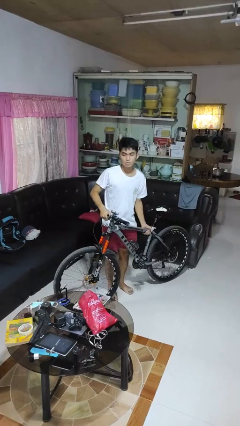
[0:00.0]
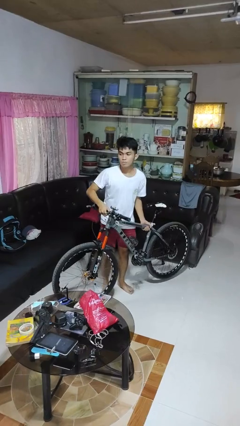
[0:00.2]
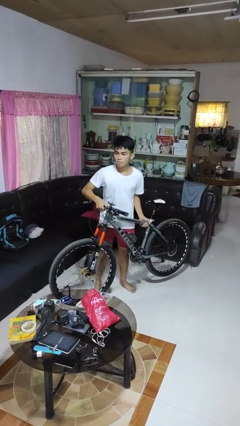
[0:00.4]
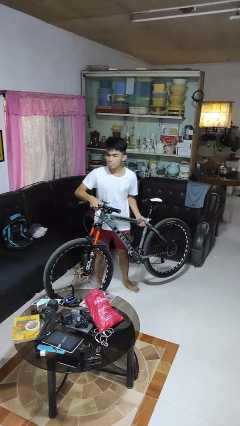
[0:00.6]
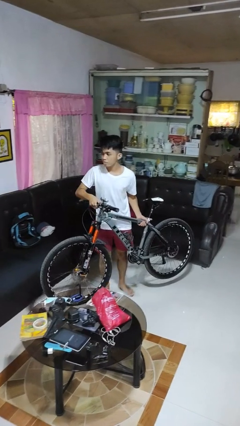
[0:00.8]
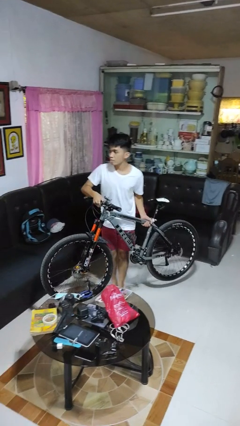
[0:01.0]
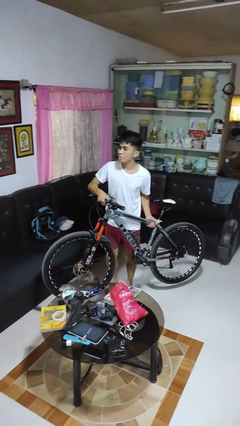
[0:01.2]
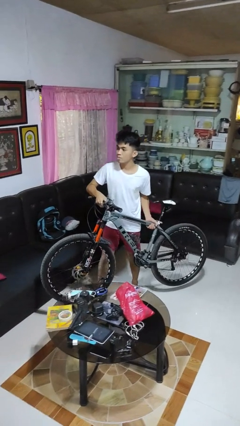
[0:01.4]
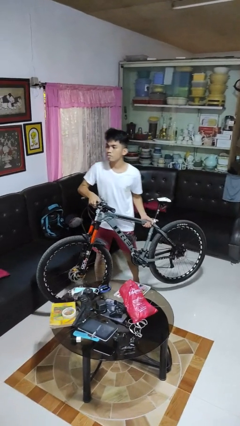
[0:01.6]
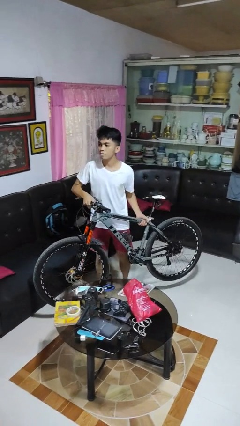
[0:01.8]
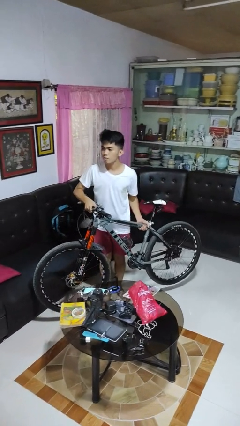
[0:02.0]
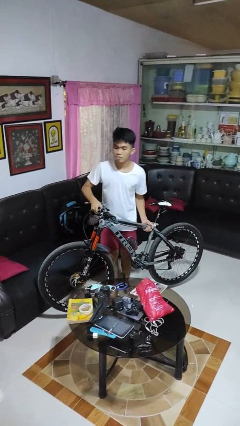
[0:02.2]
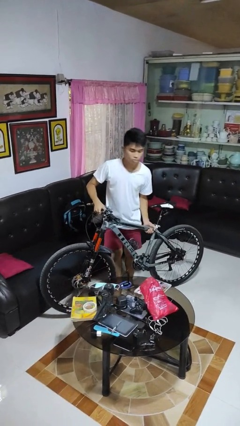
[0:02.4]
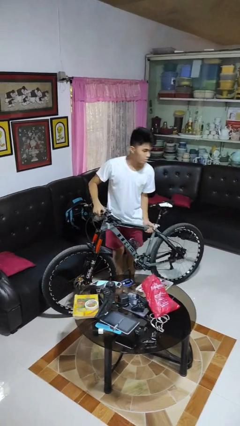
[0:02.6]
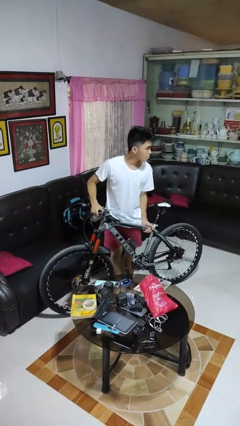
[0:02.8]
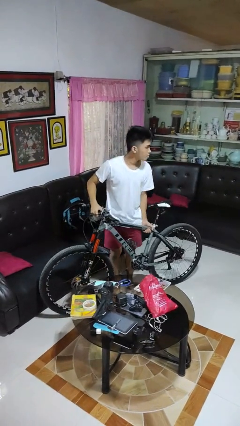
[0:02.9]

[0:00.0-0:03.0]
person carries bicycle

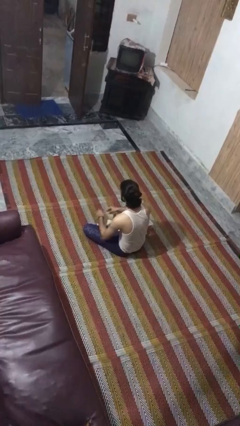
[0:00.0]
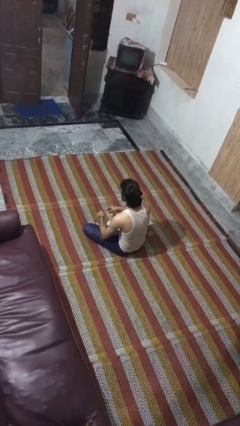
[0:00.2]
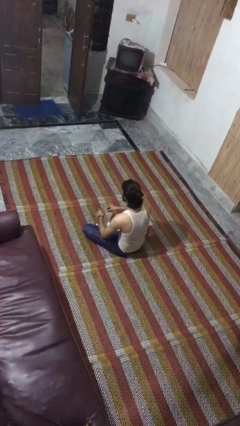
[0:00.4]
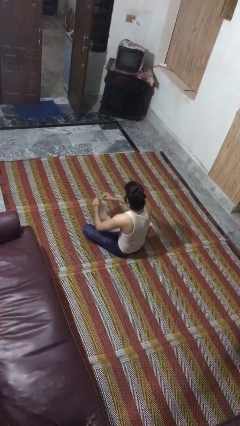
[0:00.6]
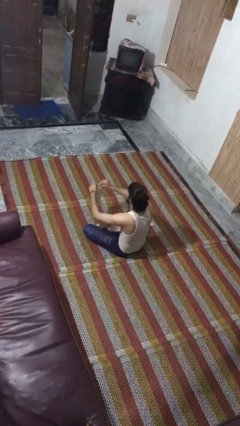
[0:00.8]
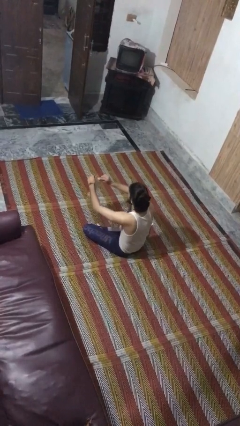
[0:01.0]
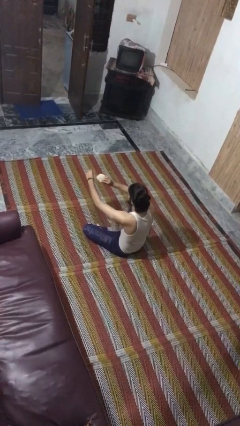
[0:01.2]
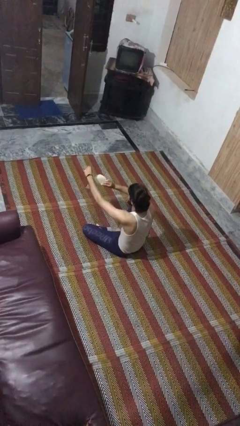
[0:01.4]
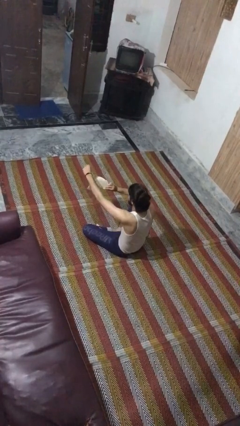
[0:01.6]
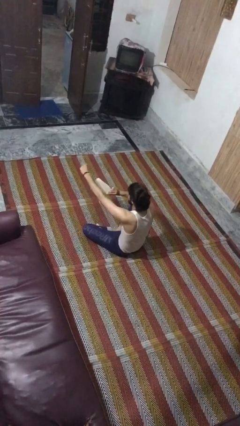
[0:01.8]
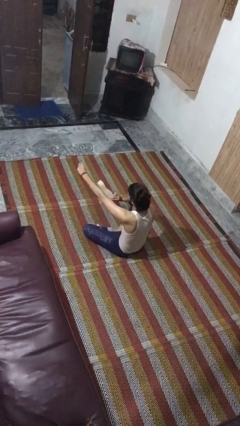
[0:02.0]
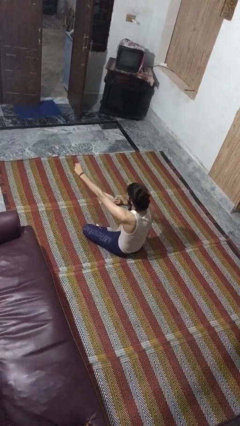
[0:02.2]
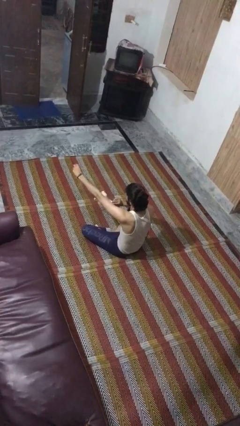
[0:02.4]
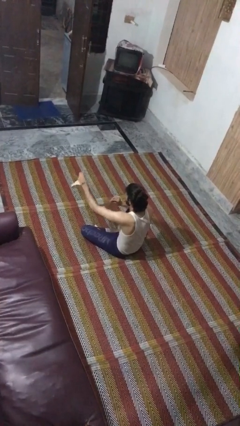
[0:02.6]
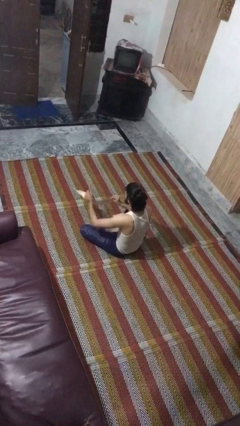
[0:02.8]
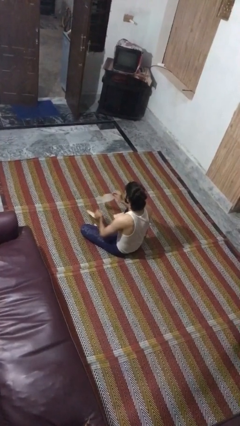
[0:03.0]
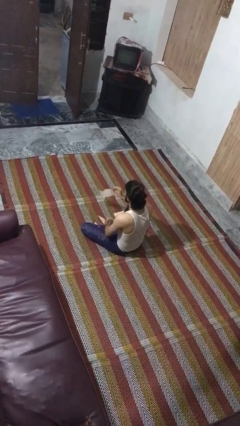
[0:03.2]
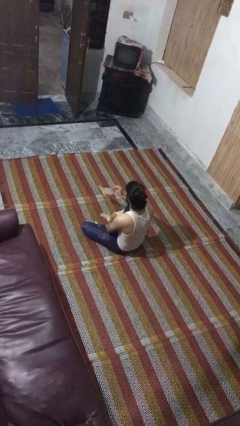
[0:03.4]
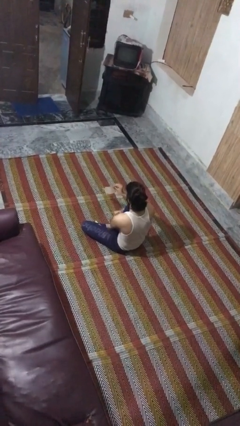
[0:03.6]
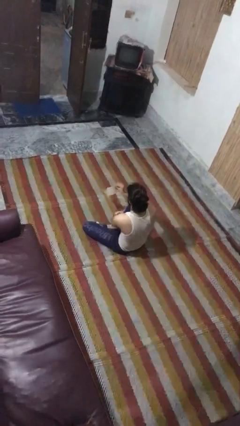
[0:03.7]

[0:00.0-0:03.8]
person tears paper

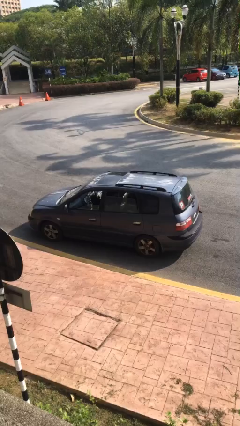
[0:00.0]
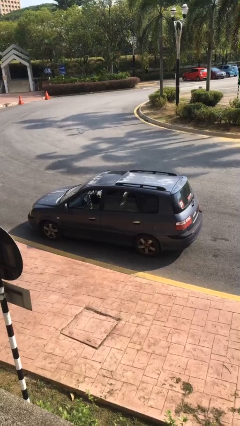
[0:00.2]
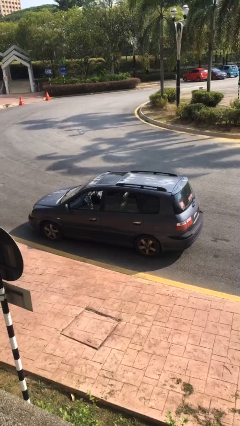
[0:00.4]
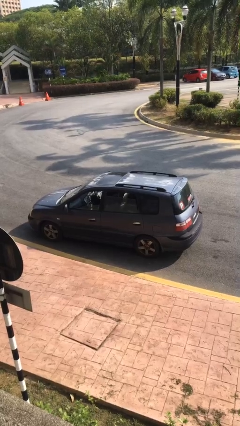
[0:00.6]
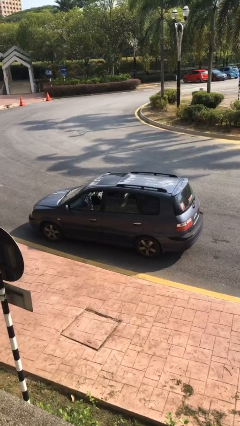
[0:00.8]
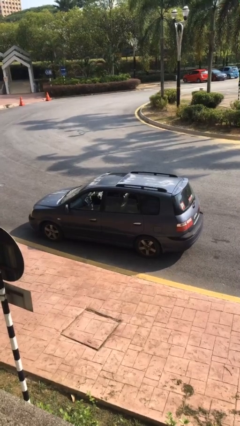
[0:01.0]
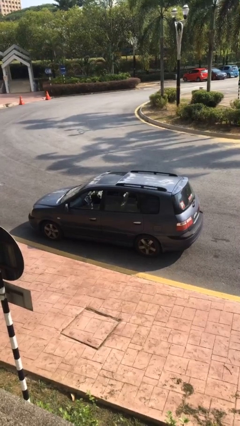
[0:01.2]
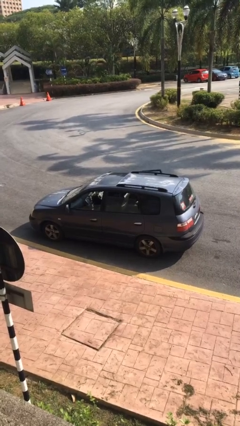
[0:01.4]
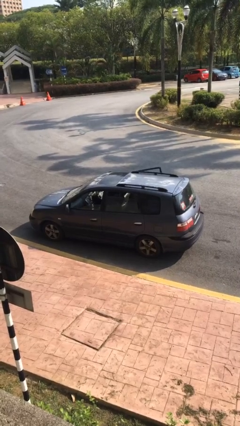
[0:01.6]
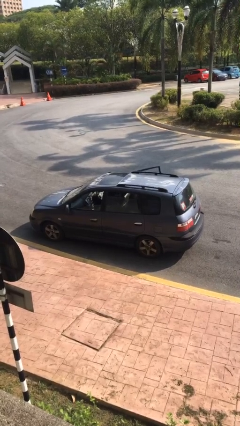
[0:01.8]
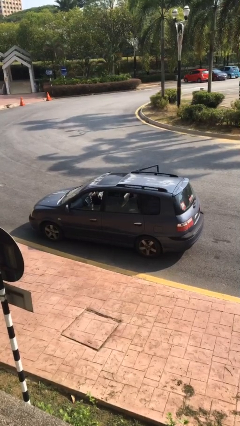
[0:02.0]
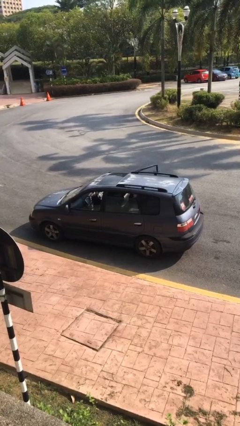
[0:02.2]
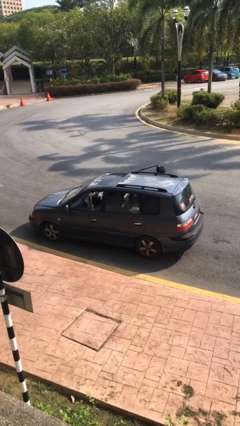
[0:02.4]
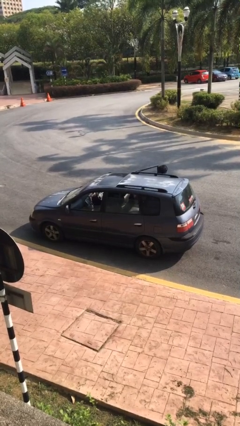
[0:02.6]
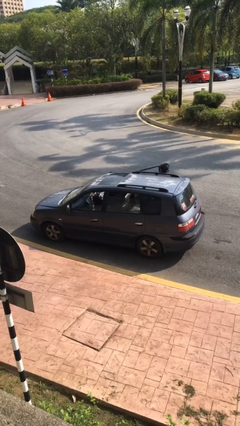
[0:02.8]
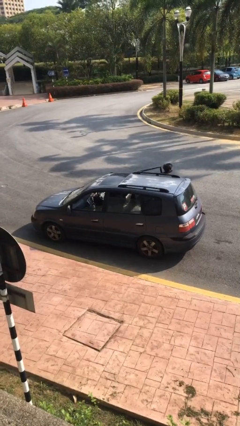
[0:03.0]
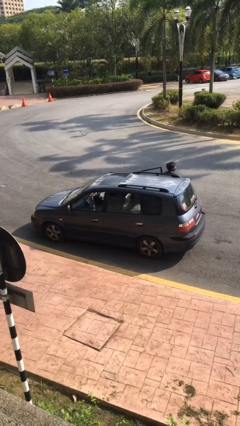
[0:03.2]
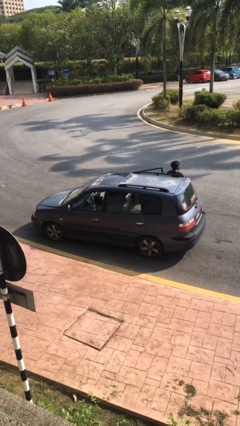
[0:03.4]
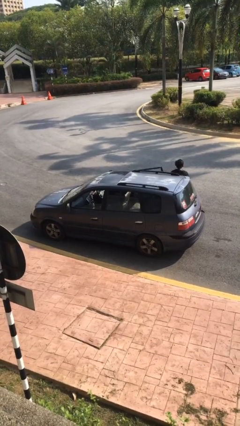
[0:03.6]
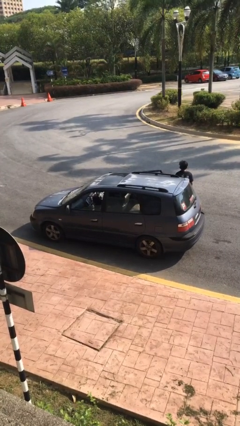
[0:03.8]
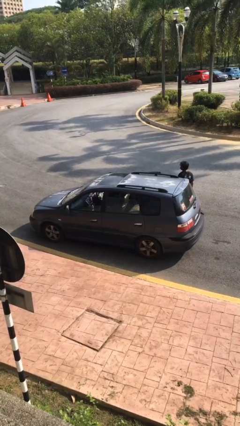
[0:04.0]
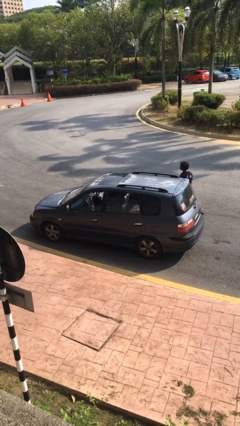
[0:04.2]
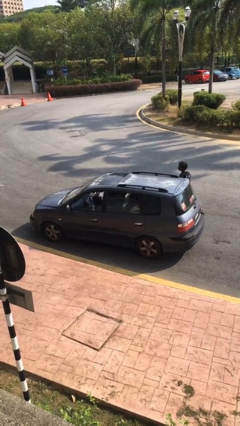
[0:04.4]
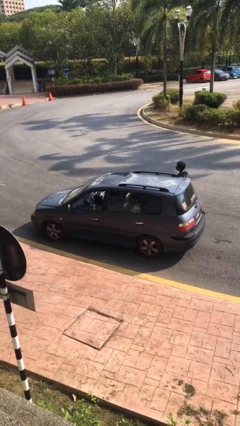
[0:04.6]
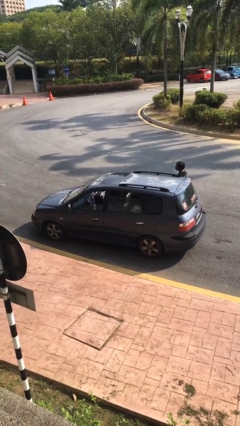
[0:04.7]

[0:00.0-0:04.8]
car drops off person

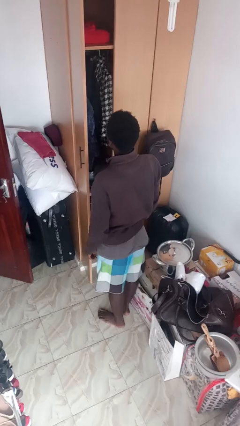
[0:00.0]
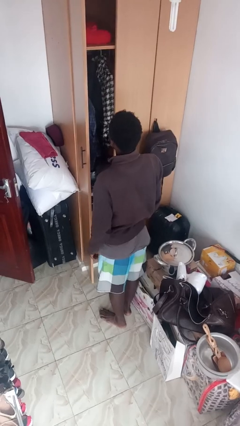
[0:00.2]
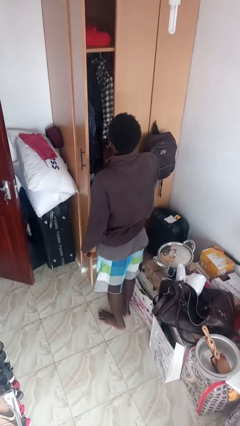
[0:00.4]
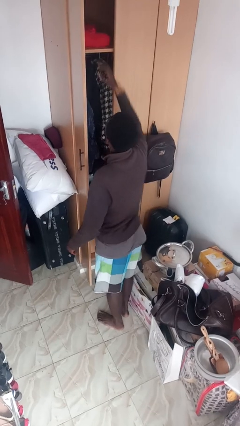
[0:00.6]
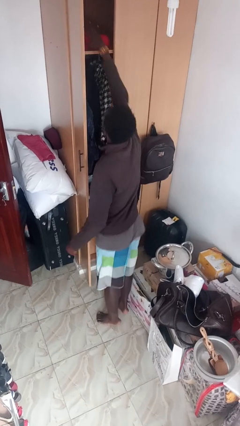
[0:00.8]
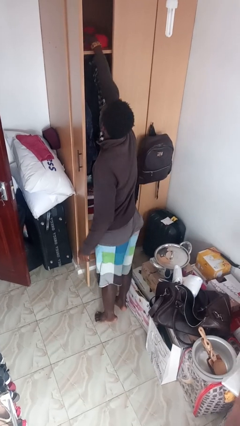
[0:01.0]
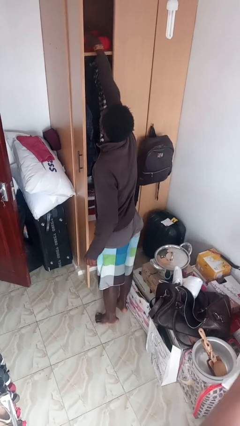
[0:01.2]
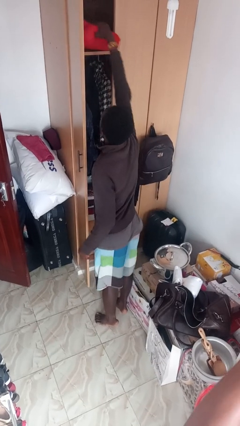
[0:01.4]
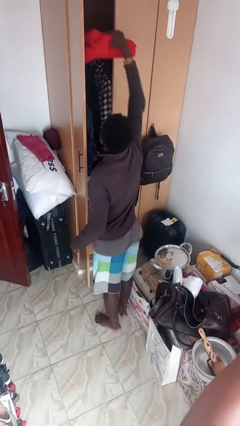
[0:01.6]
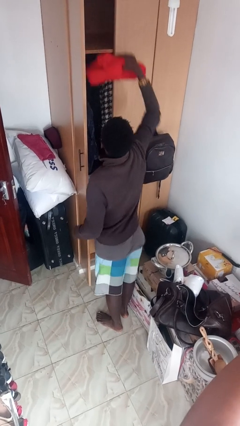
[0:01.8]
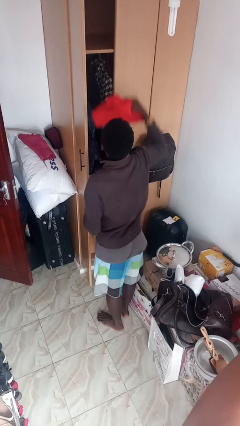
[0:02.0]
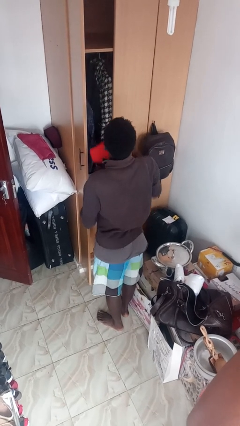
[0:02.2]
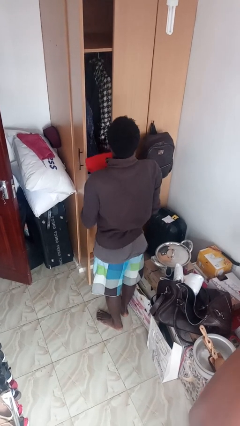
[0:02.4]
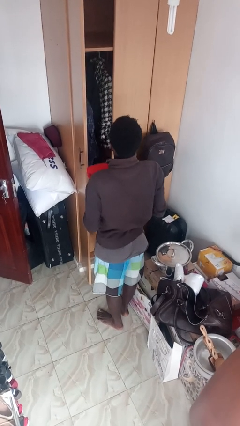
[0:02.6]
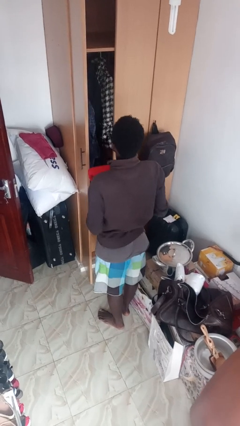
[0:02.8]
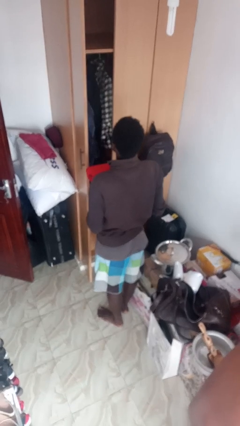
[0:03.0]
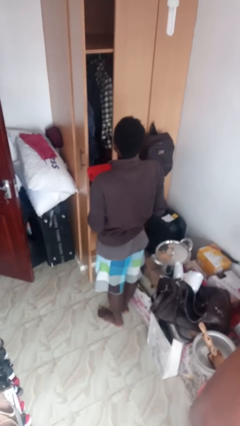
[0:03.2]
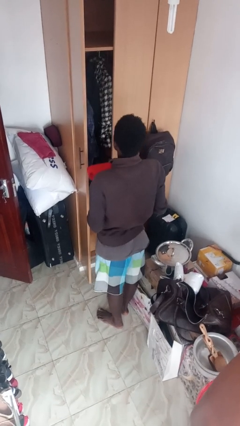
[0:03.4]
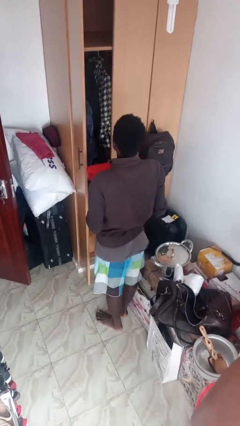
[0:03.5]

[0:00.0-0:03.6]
person picks up object from shelf

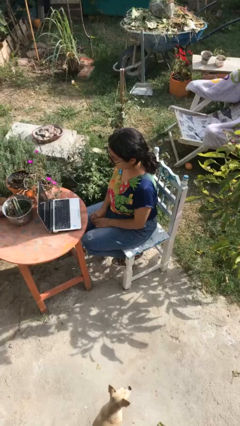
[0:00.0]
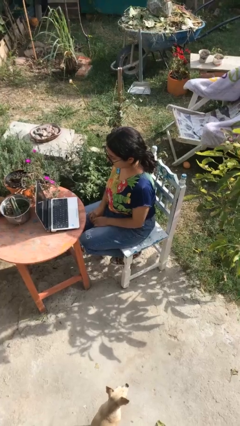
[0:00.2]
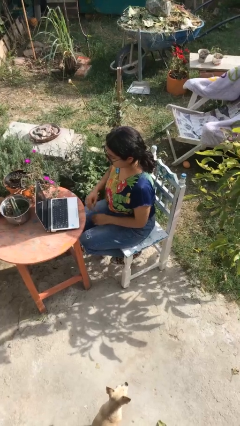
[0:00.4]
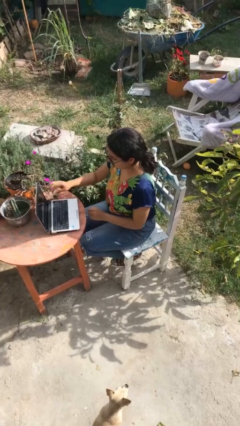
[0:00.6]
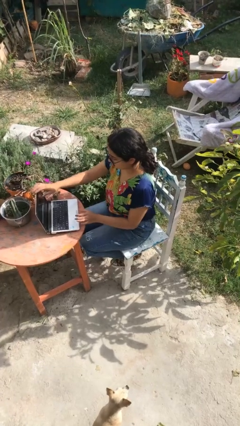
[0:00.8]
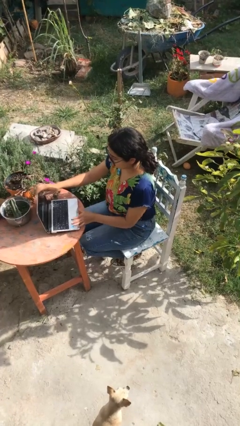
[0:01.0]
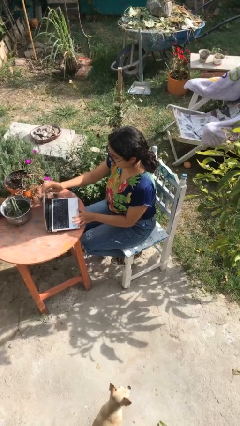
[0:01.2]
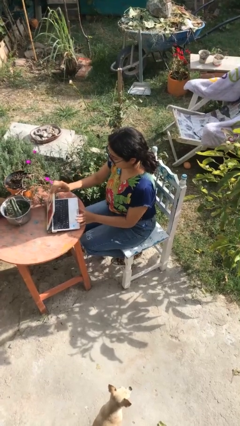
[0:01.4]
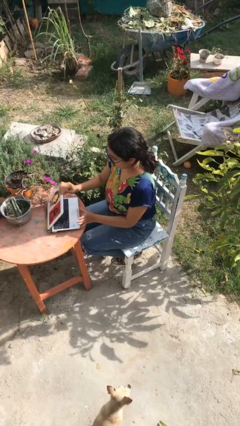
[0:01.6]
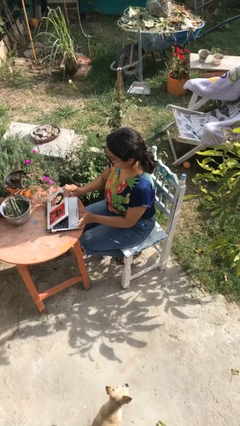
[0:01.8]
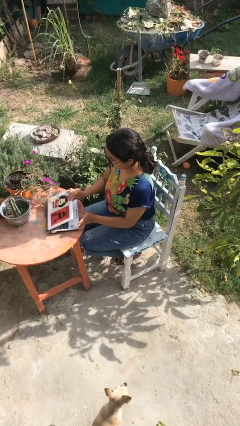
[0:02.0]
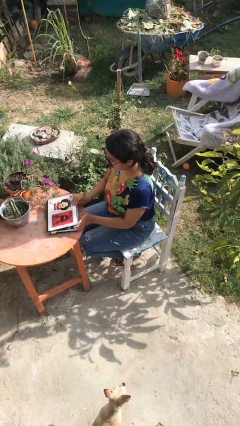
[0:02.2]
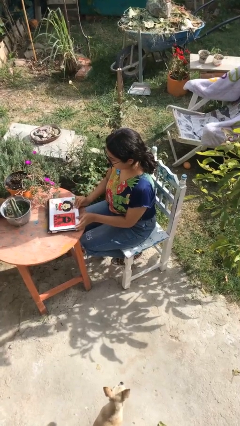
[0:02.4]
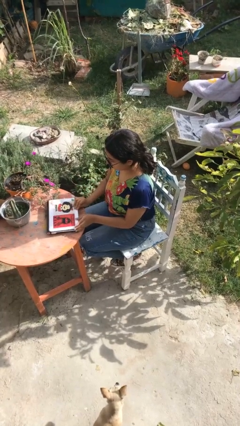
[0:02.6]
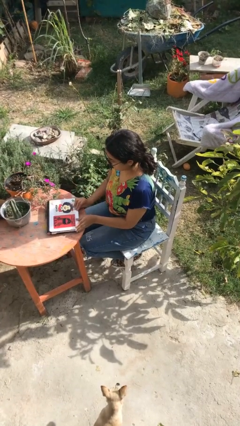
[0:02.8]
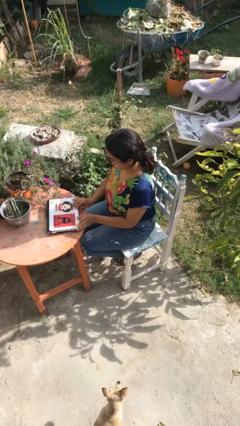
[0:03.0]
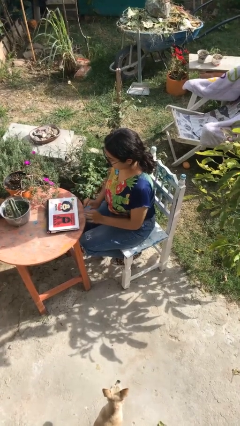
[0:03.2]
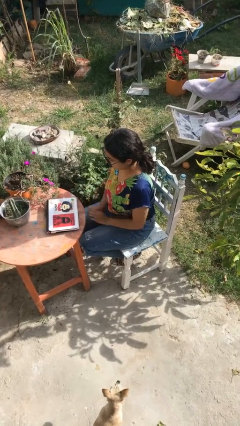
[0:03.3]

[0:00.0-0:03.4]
person closes laptop
